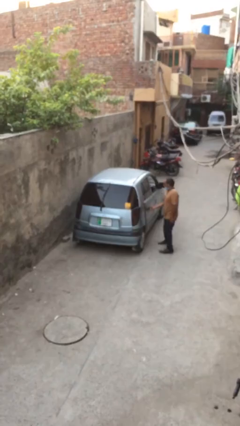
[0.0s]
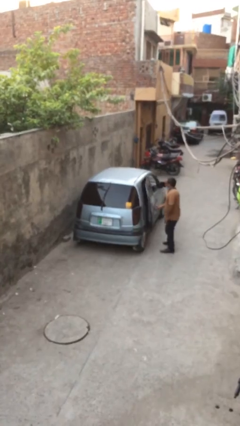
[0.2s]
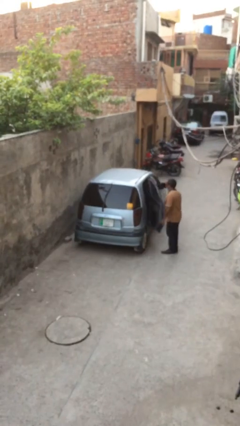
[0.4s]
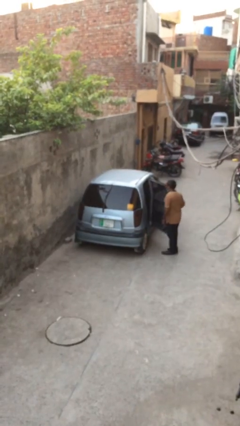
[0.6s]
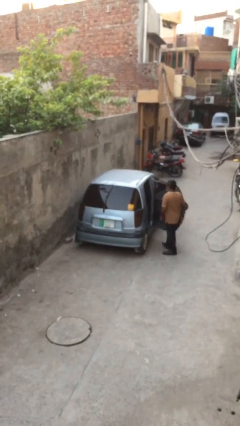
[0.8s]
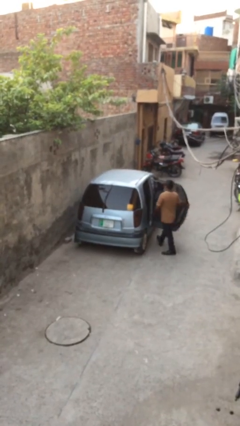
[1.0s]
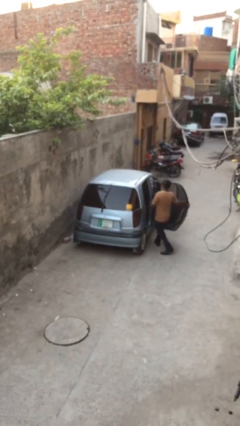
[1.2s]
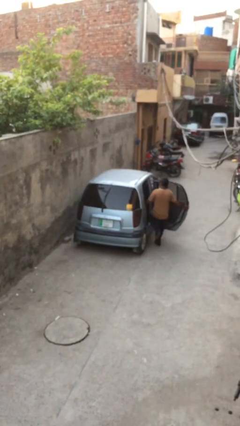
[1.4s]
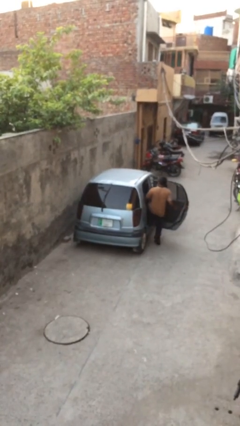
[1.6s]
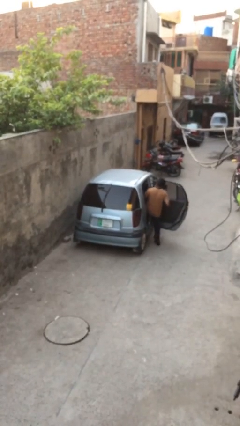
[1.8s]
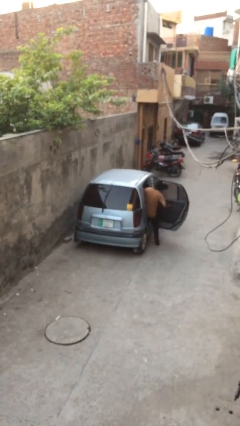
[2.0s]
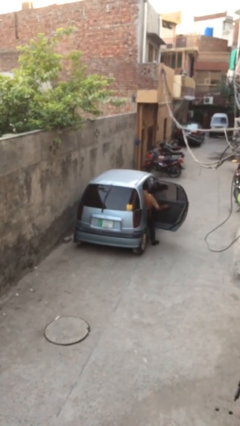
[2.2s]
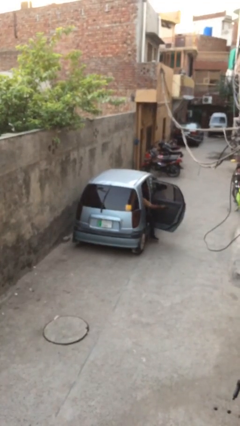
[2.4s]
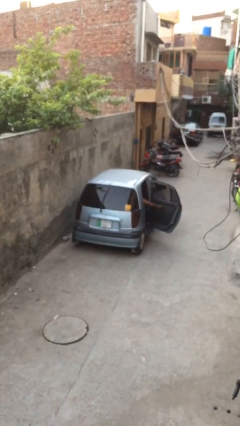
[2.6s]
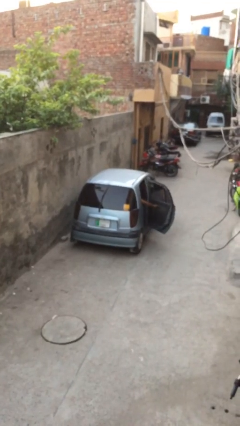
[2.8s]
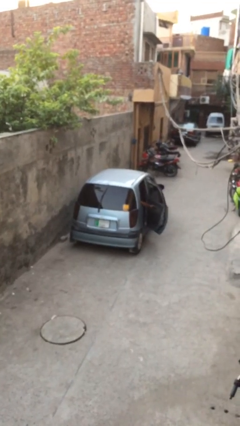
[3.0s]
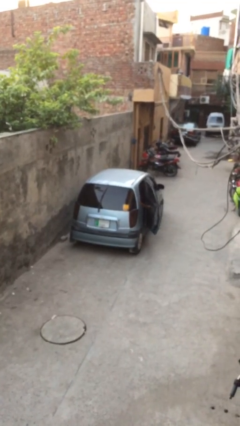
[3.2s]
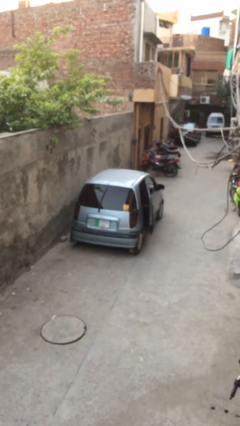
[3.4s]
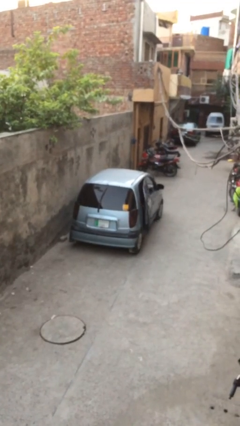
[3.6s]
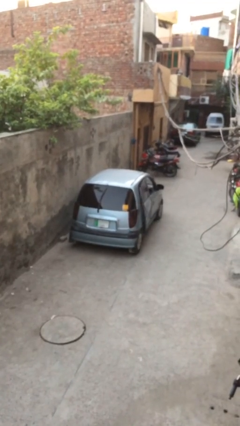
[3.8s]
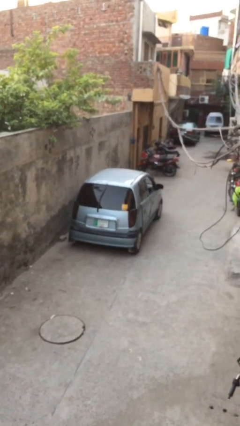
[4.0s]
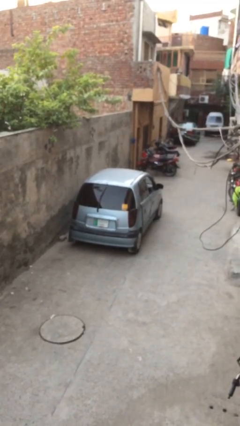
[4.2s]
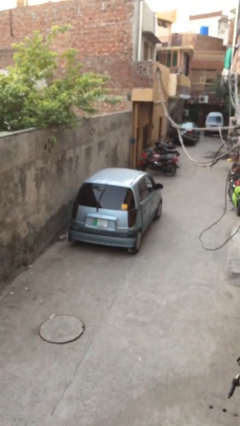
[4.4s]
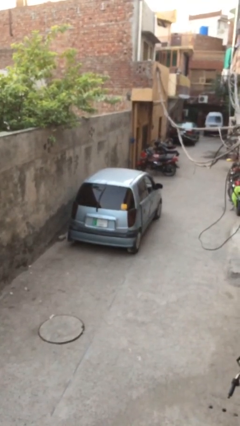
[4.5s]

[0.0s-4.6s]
car picks up person

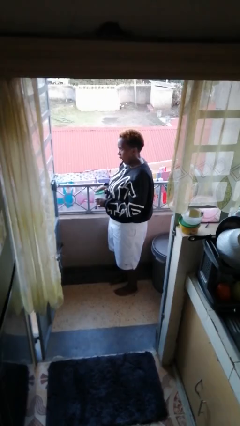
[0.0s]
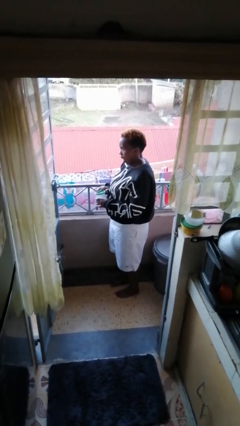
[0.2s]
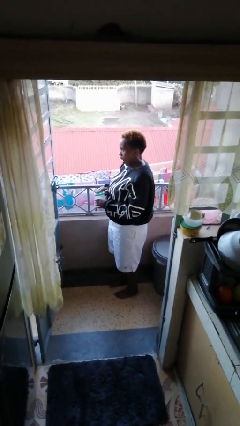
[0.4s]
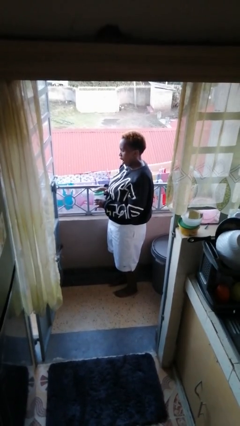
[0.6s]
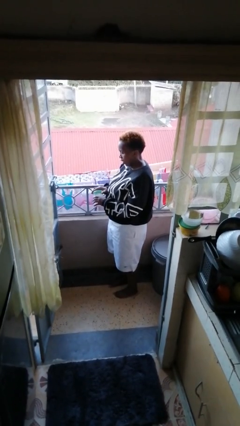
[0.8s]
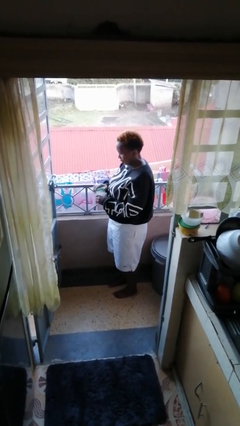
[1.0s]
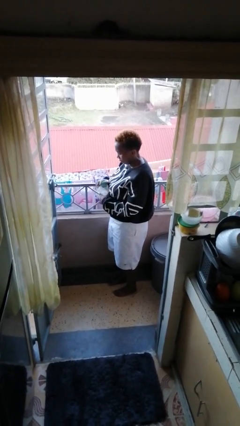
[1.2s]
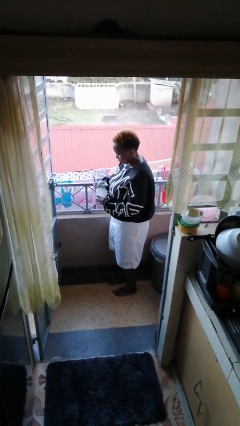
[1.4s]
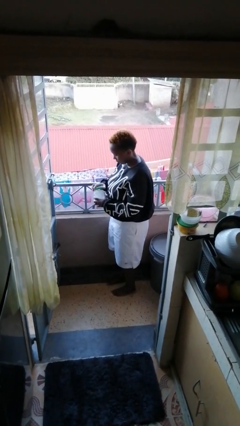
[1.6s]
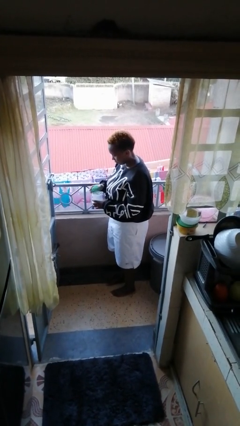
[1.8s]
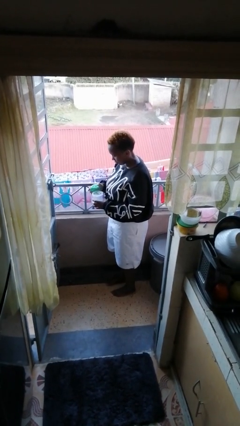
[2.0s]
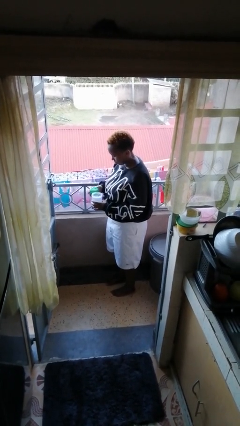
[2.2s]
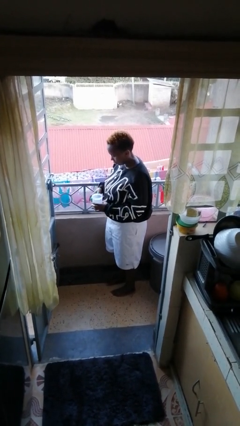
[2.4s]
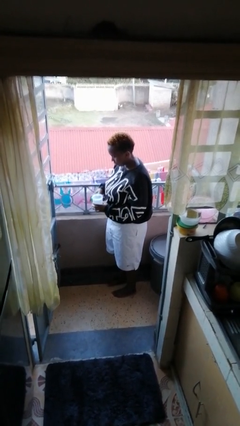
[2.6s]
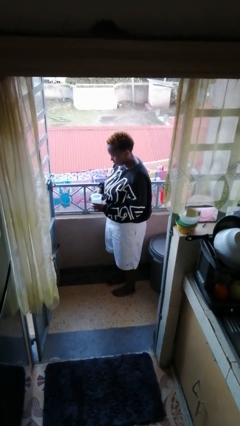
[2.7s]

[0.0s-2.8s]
person opens jar

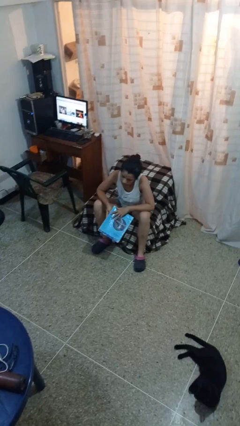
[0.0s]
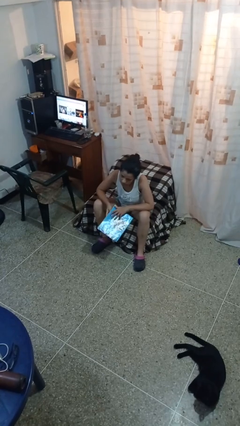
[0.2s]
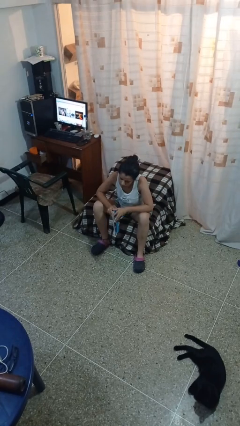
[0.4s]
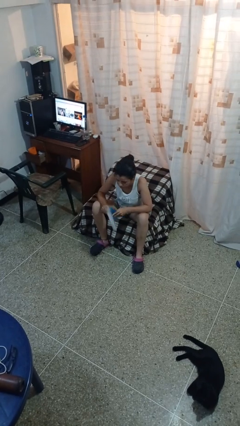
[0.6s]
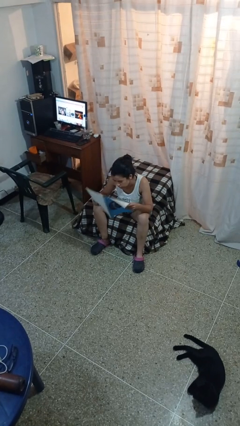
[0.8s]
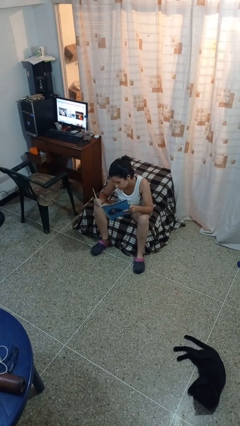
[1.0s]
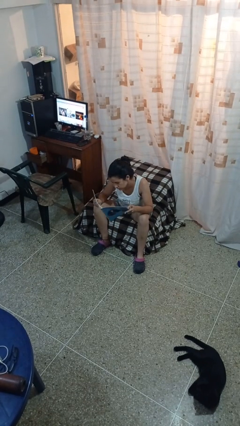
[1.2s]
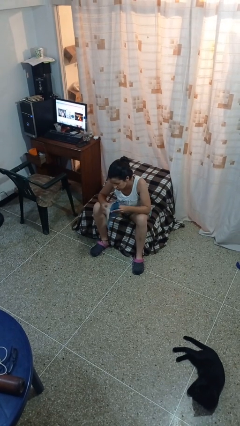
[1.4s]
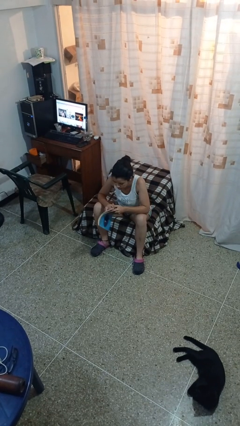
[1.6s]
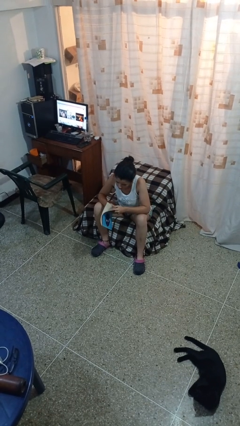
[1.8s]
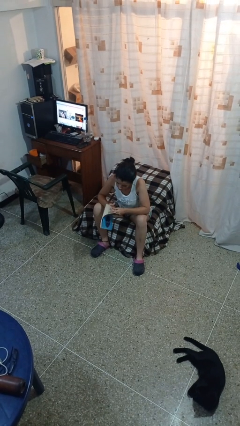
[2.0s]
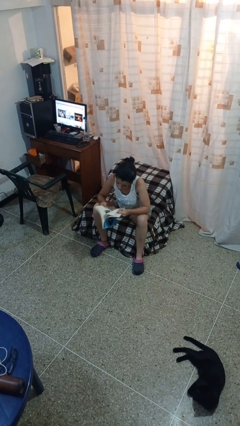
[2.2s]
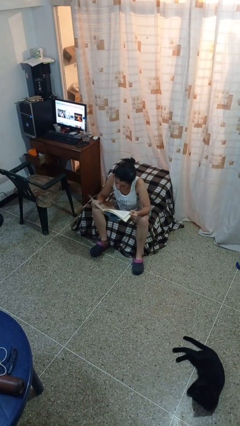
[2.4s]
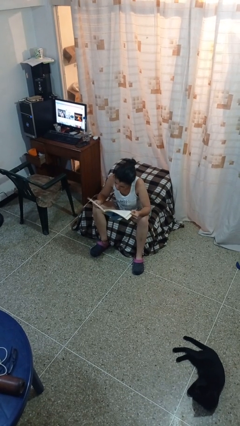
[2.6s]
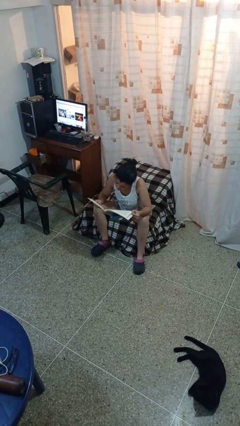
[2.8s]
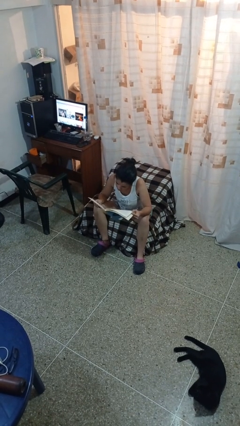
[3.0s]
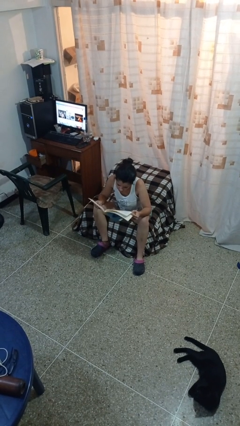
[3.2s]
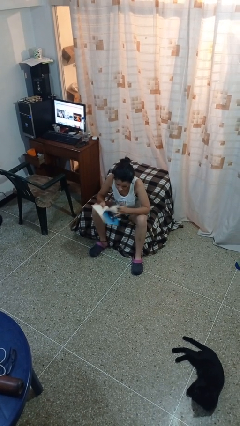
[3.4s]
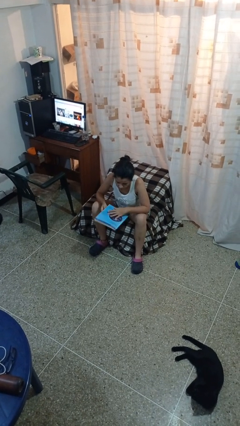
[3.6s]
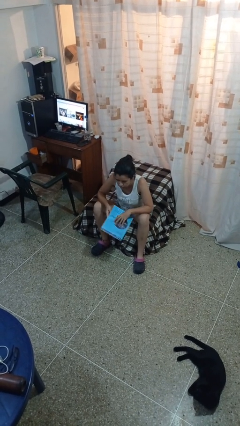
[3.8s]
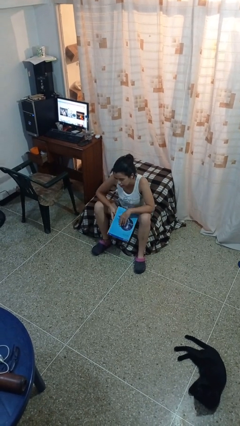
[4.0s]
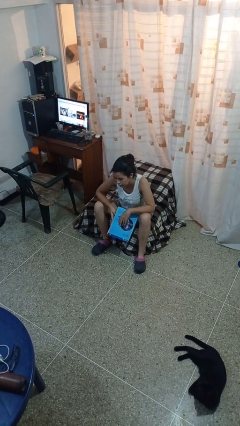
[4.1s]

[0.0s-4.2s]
person reads magazine

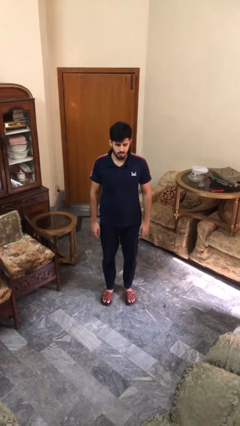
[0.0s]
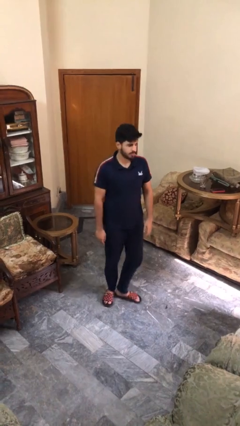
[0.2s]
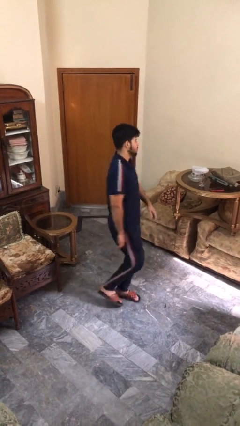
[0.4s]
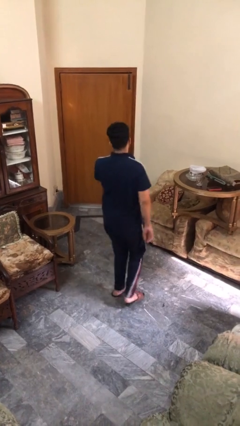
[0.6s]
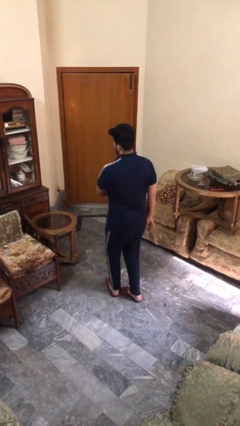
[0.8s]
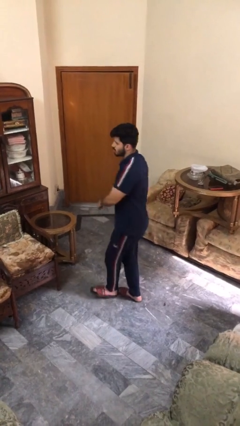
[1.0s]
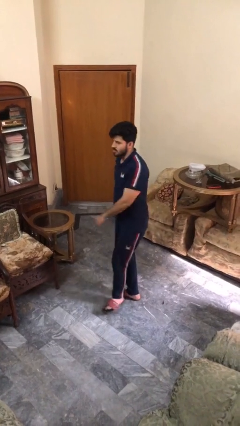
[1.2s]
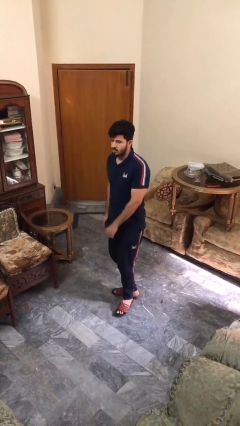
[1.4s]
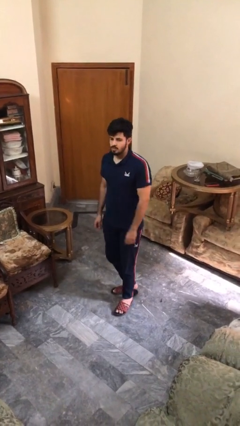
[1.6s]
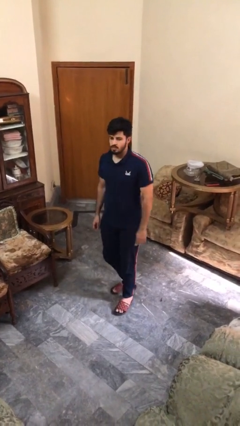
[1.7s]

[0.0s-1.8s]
person twirls

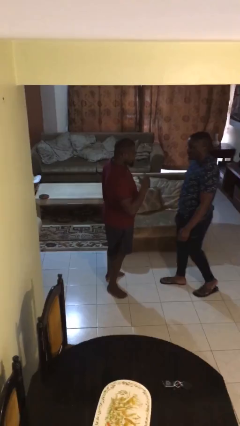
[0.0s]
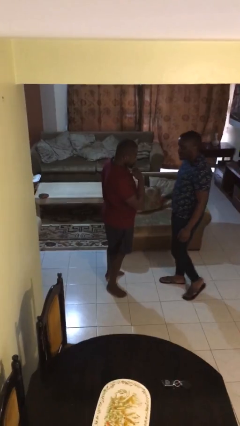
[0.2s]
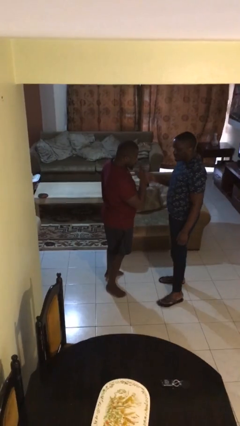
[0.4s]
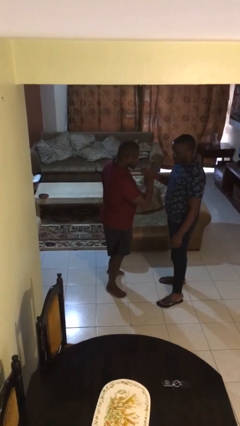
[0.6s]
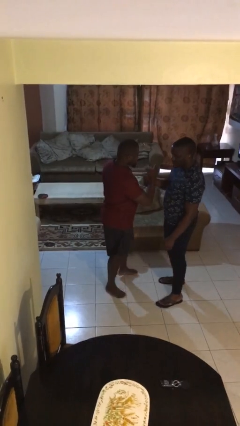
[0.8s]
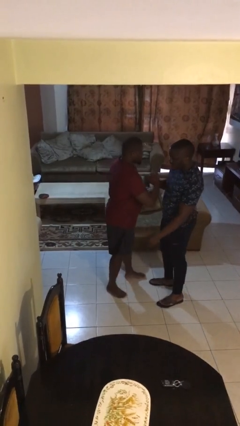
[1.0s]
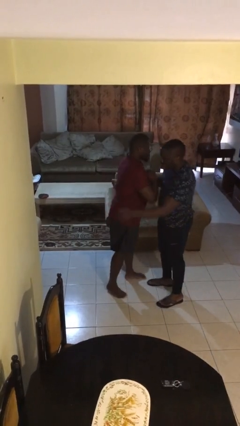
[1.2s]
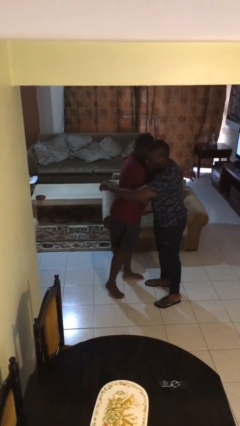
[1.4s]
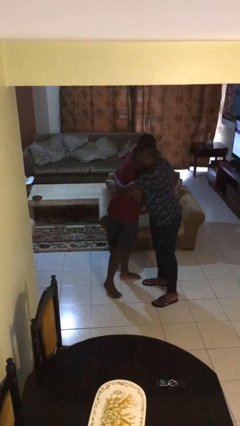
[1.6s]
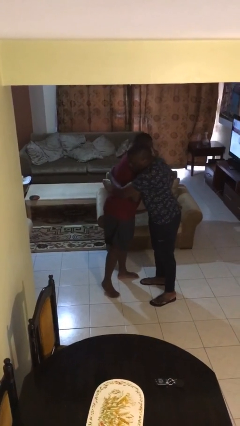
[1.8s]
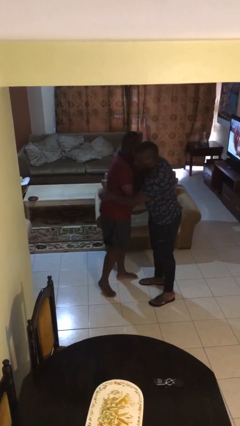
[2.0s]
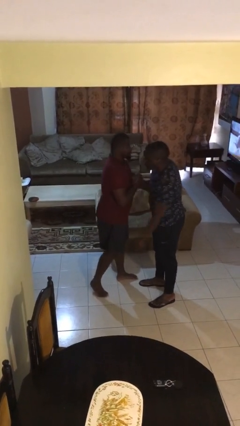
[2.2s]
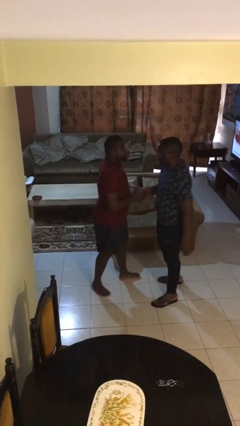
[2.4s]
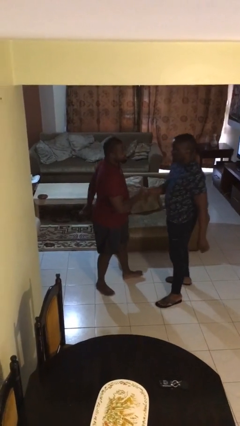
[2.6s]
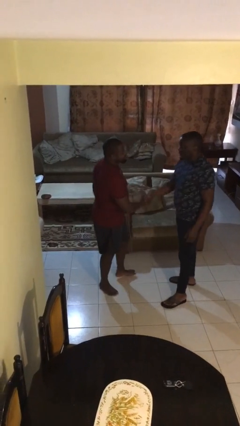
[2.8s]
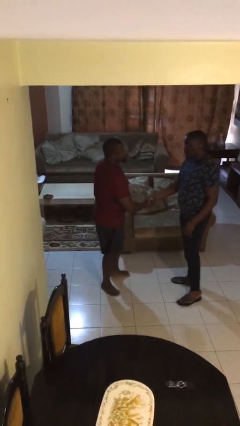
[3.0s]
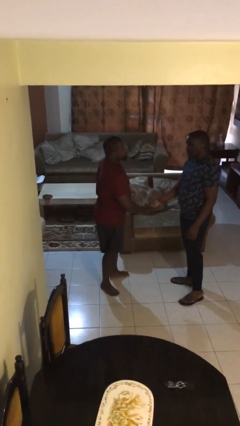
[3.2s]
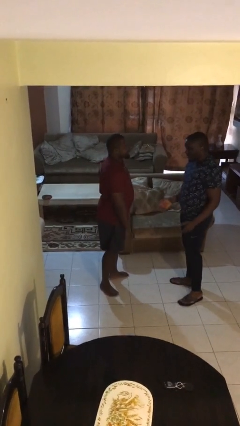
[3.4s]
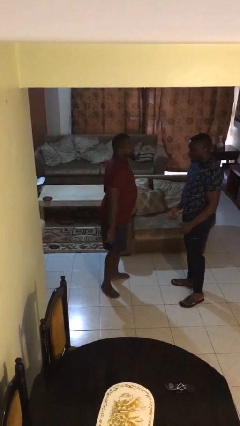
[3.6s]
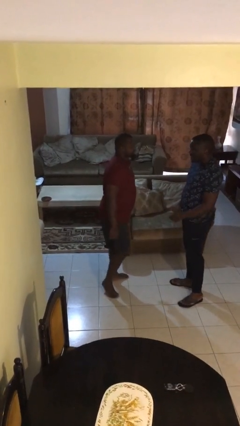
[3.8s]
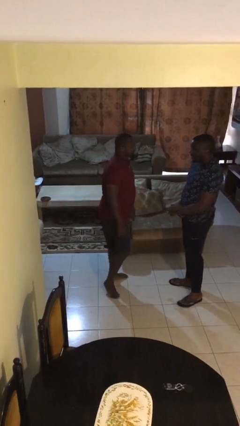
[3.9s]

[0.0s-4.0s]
person embraces person

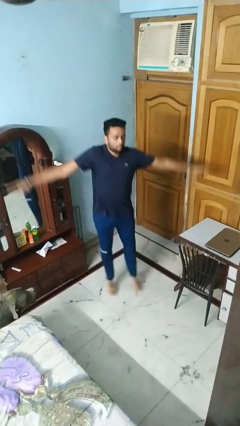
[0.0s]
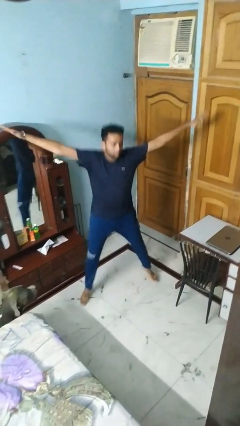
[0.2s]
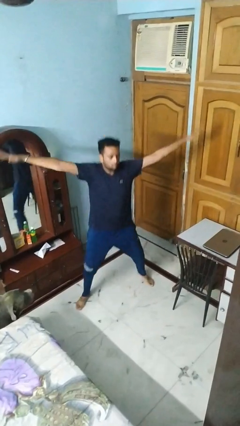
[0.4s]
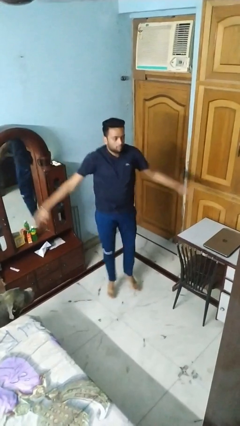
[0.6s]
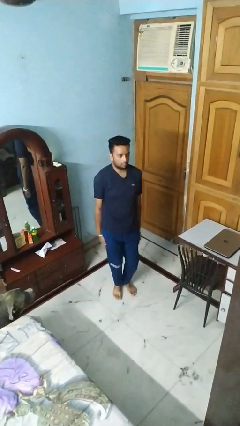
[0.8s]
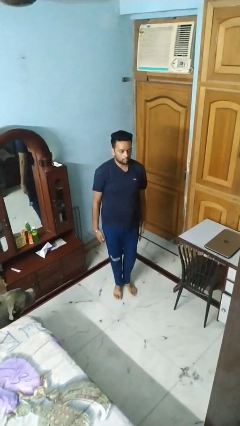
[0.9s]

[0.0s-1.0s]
person exercises with jumping jacks
